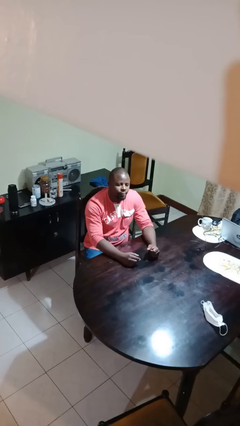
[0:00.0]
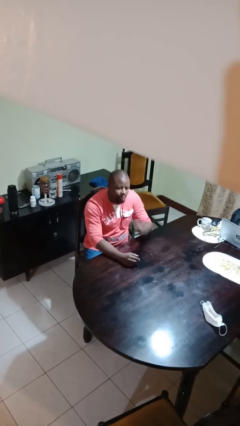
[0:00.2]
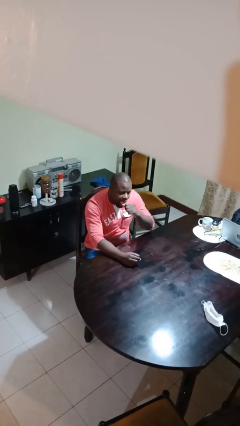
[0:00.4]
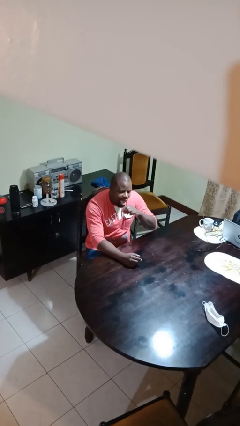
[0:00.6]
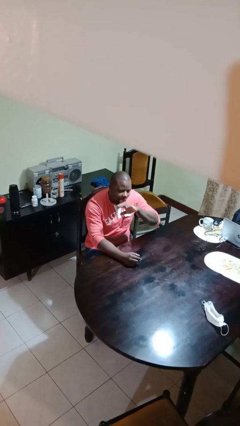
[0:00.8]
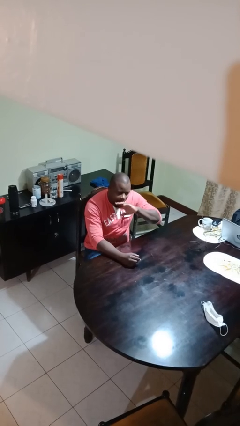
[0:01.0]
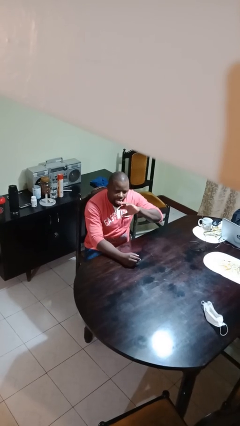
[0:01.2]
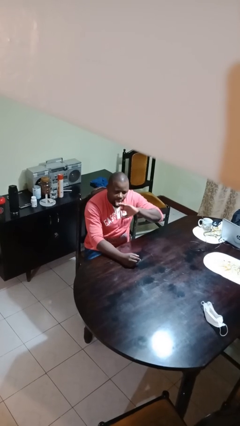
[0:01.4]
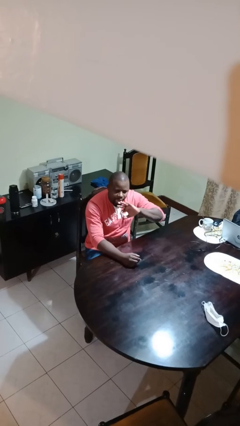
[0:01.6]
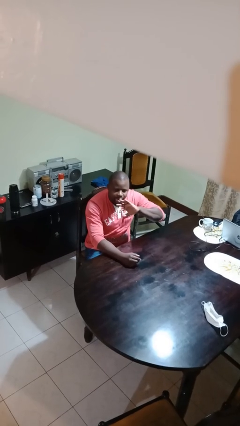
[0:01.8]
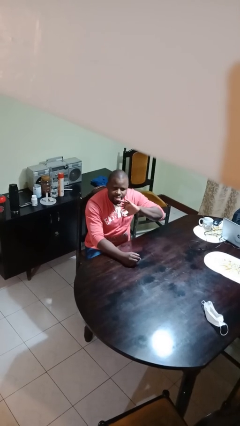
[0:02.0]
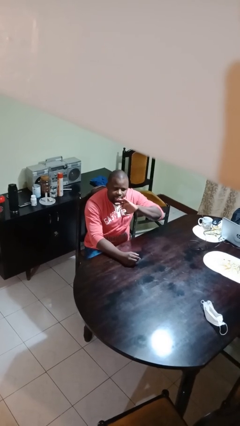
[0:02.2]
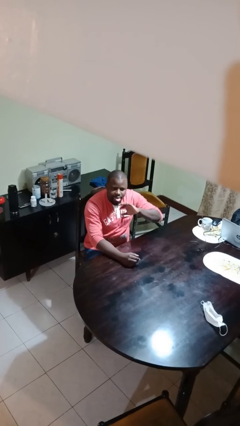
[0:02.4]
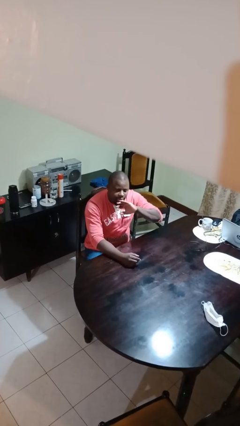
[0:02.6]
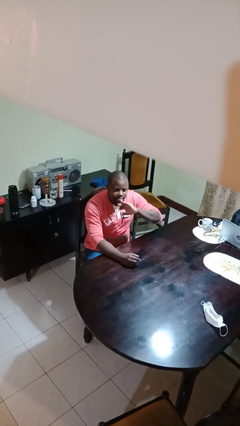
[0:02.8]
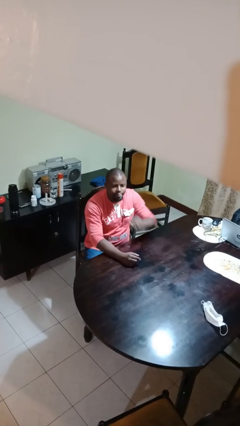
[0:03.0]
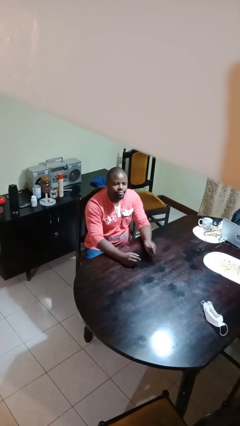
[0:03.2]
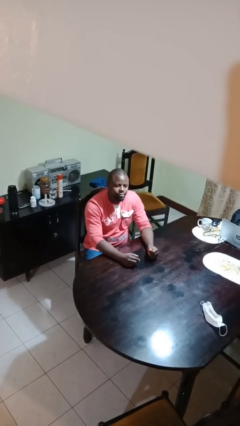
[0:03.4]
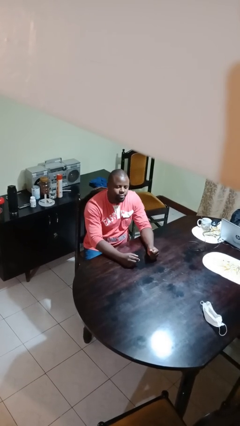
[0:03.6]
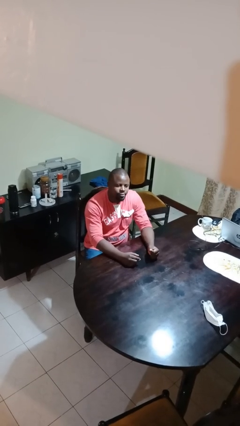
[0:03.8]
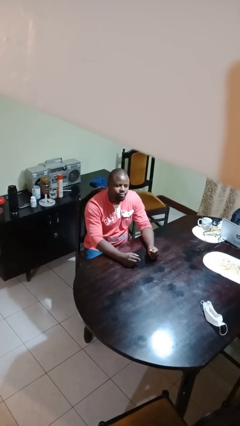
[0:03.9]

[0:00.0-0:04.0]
person licks fingers

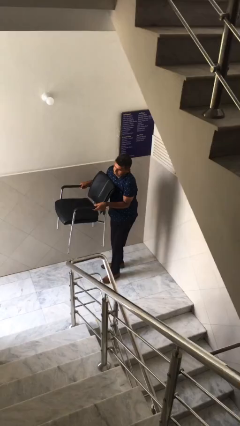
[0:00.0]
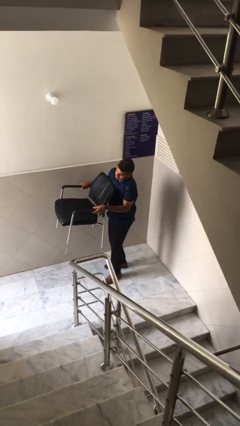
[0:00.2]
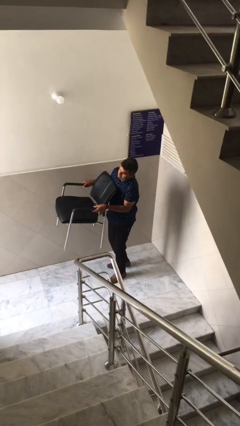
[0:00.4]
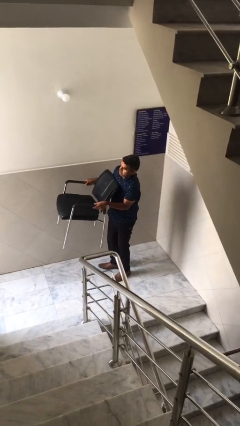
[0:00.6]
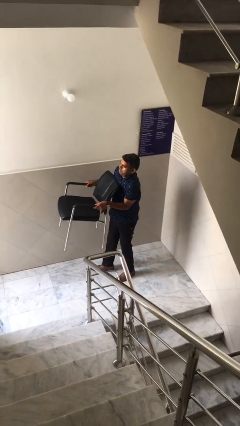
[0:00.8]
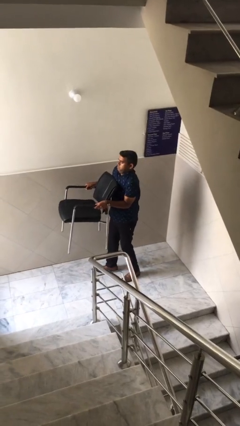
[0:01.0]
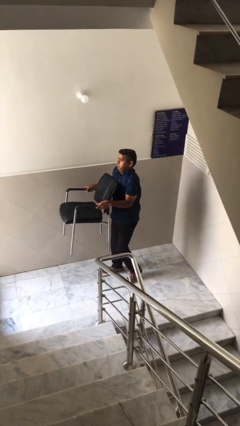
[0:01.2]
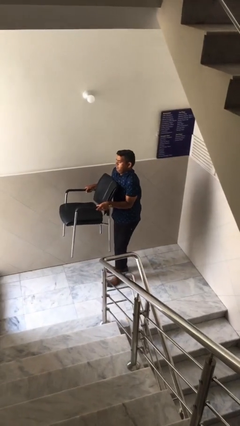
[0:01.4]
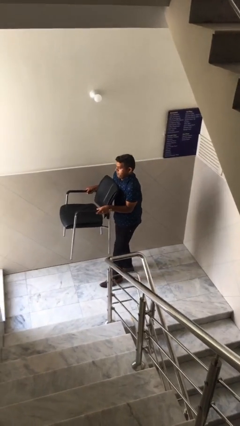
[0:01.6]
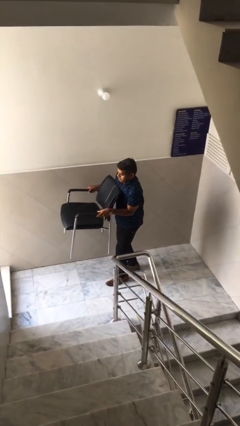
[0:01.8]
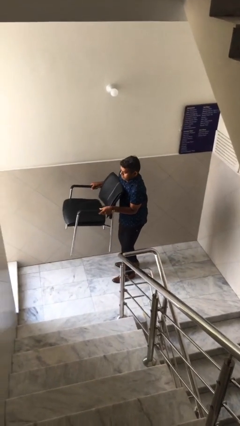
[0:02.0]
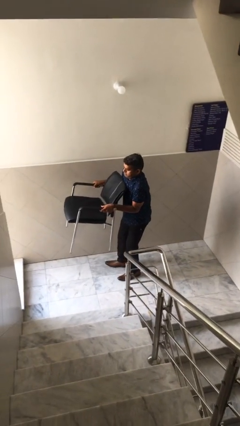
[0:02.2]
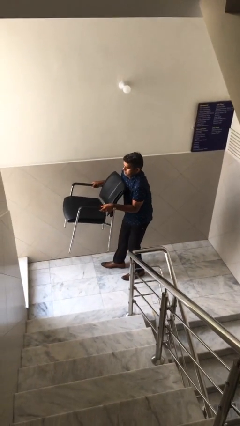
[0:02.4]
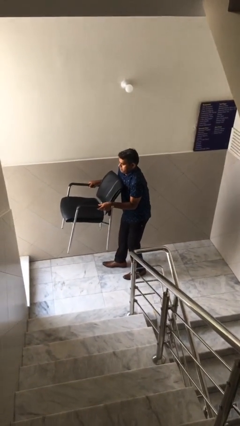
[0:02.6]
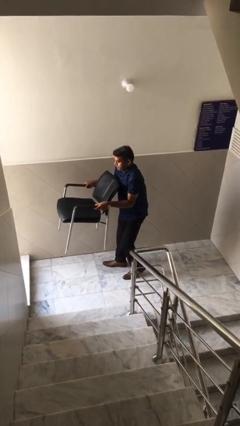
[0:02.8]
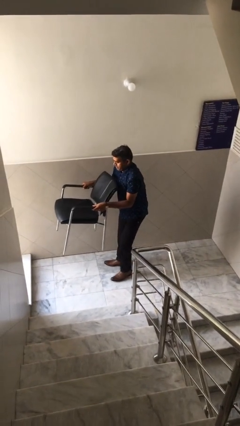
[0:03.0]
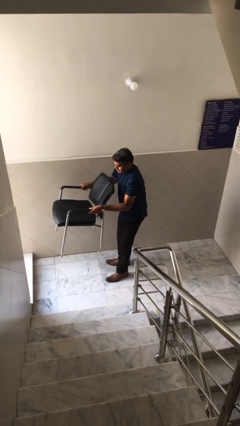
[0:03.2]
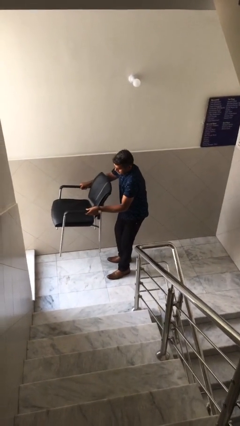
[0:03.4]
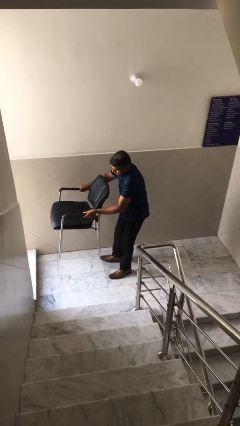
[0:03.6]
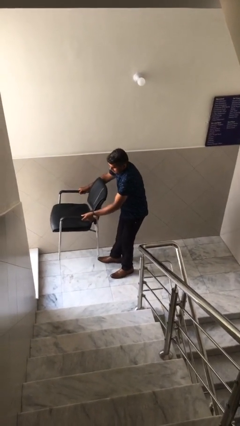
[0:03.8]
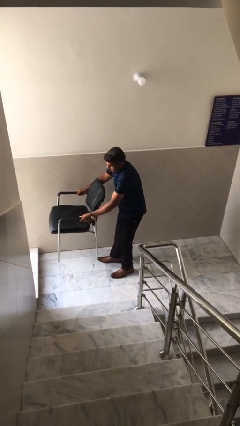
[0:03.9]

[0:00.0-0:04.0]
person carries heavy object

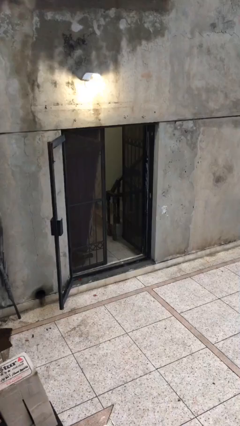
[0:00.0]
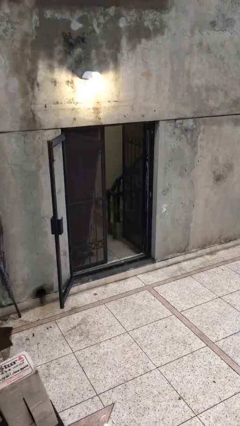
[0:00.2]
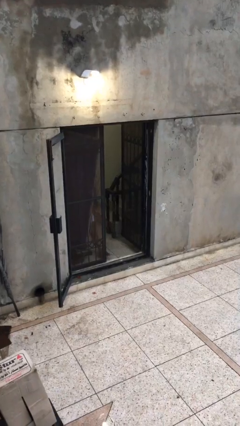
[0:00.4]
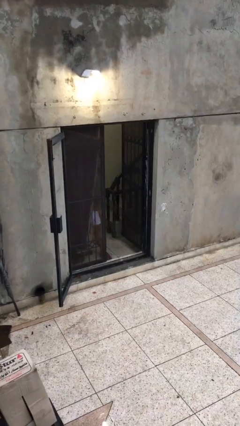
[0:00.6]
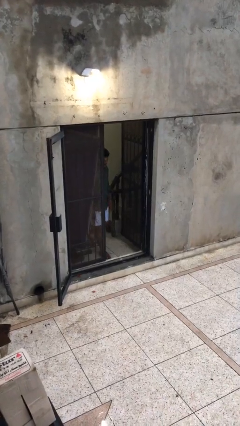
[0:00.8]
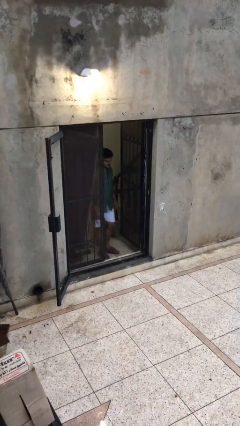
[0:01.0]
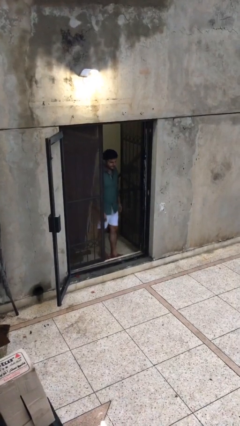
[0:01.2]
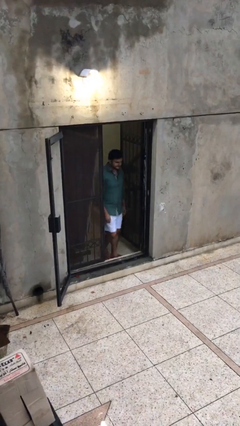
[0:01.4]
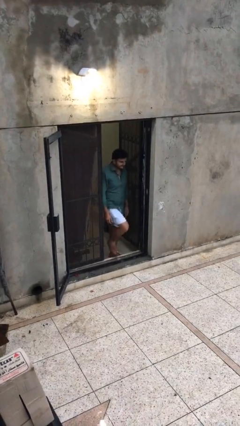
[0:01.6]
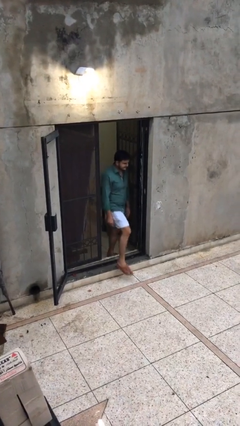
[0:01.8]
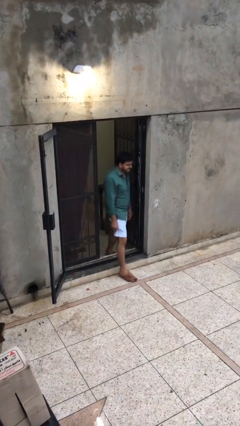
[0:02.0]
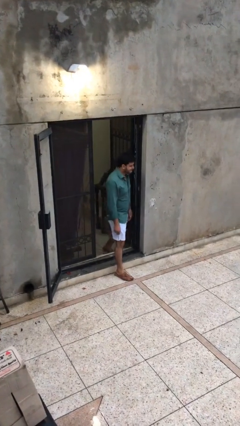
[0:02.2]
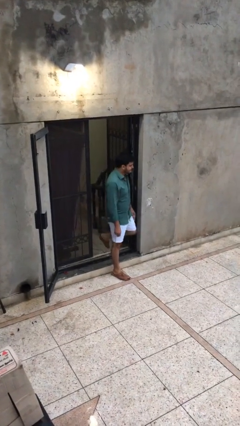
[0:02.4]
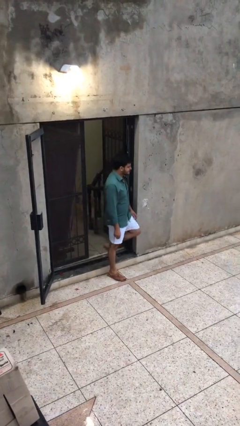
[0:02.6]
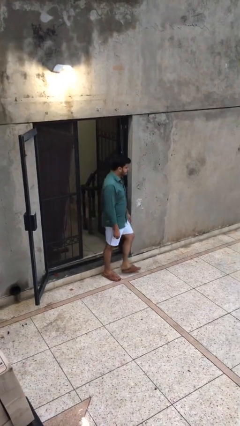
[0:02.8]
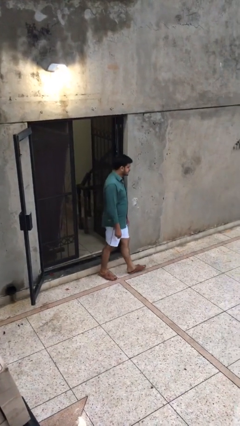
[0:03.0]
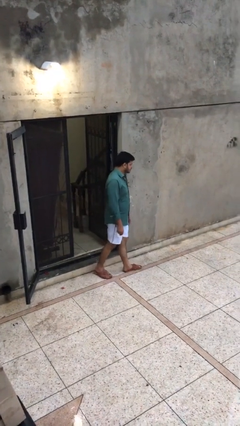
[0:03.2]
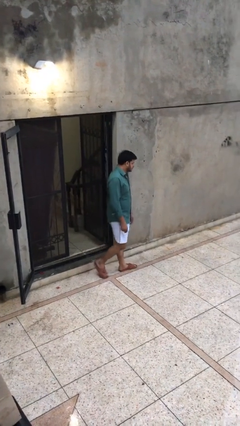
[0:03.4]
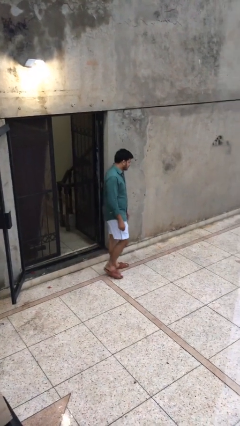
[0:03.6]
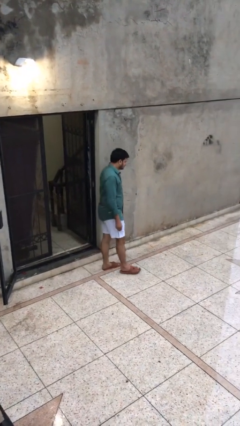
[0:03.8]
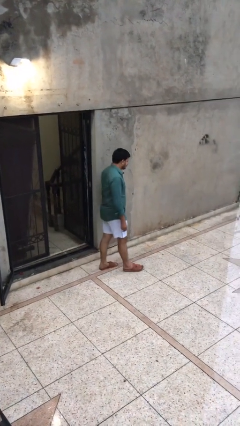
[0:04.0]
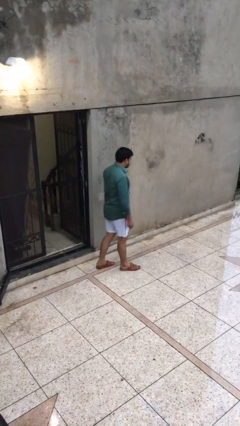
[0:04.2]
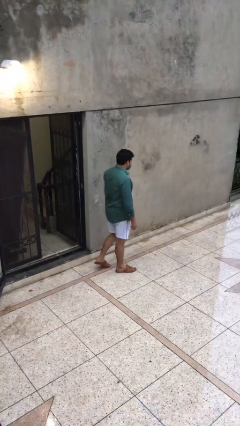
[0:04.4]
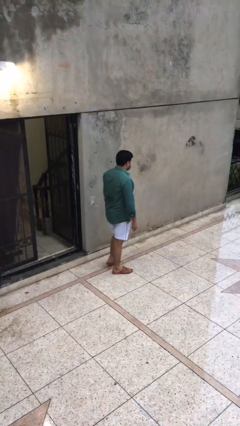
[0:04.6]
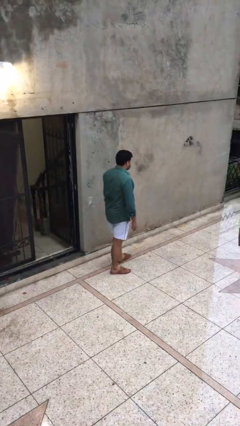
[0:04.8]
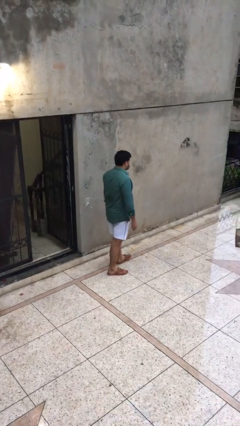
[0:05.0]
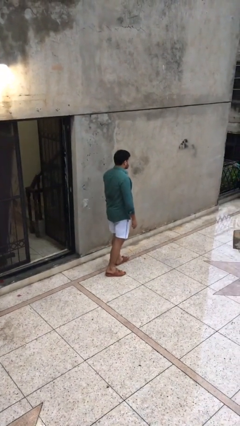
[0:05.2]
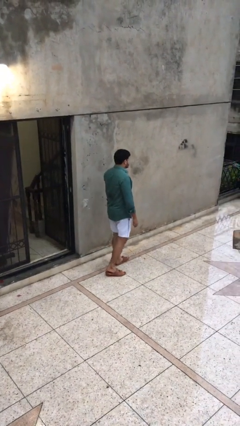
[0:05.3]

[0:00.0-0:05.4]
person enters scene through structure

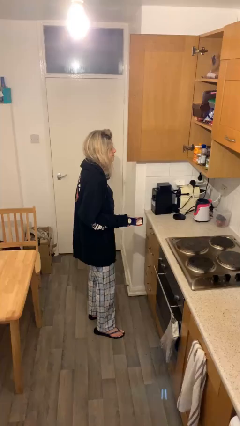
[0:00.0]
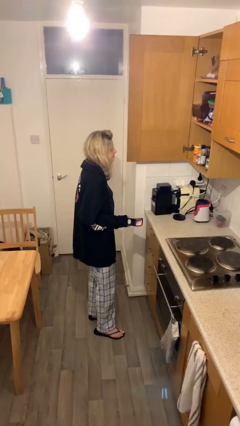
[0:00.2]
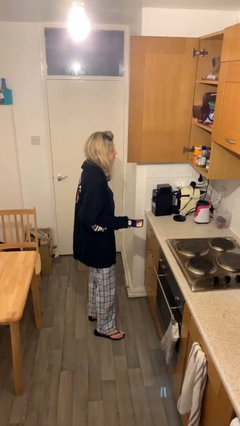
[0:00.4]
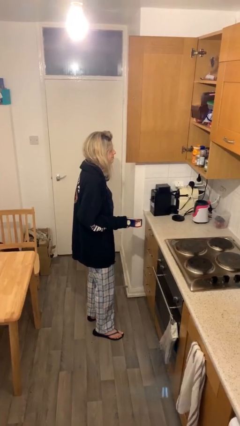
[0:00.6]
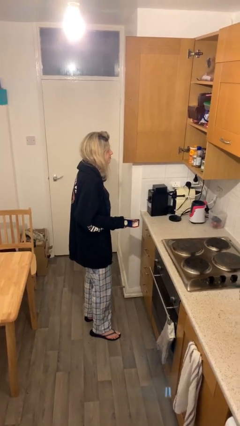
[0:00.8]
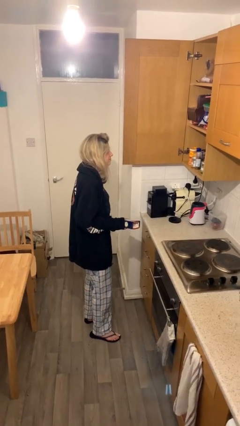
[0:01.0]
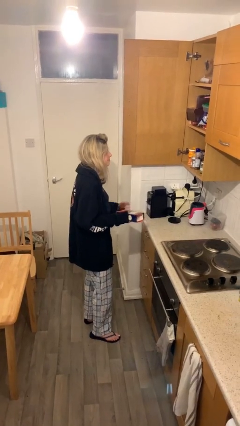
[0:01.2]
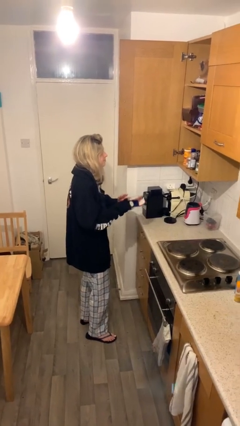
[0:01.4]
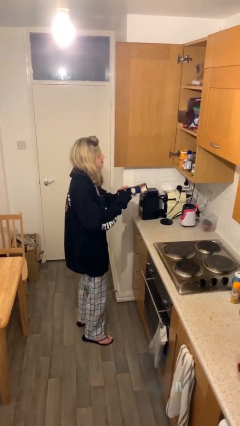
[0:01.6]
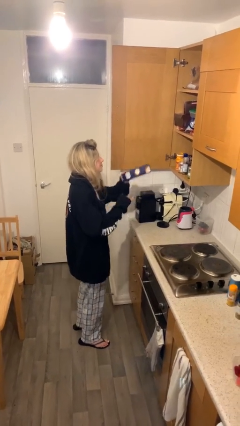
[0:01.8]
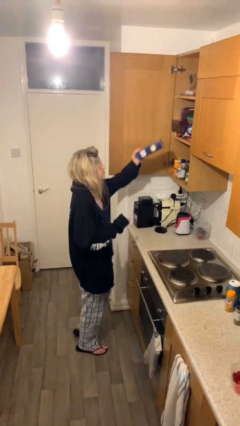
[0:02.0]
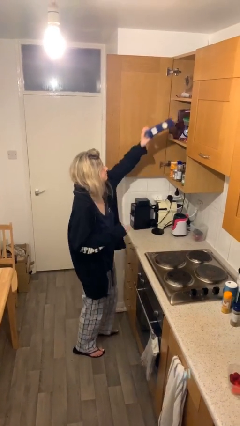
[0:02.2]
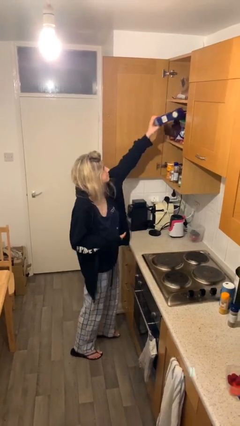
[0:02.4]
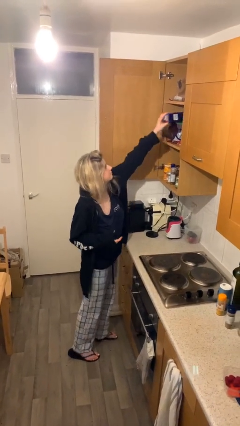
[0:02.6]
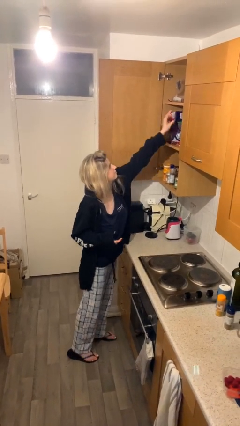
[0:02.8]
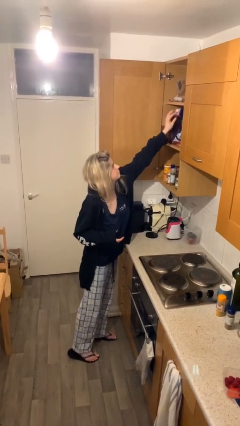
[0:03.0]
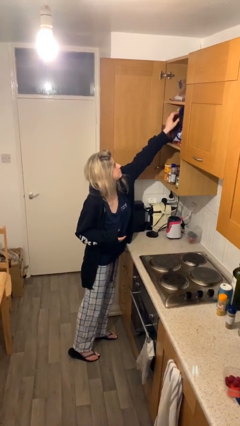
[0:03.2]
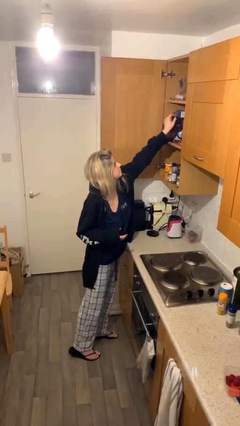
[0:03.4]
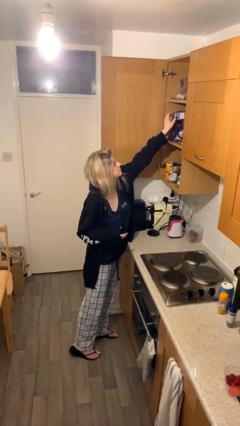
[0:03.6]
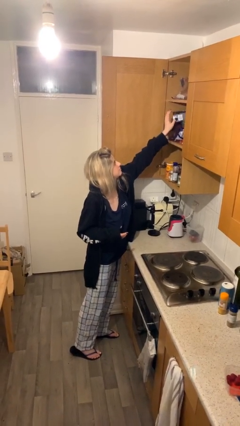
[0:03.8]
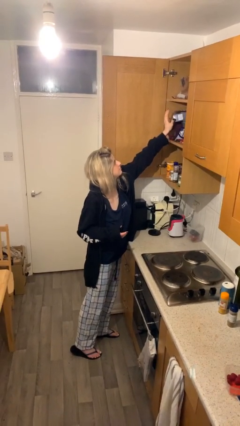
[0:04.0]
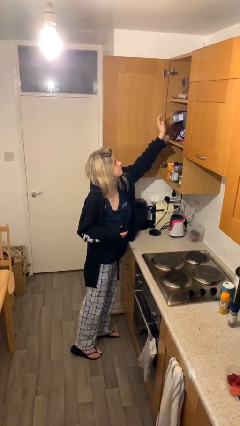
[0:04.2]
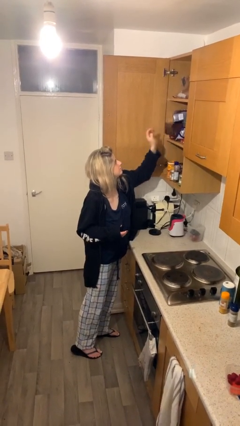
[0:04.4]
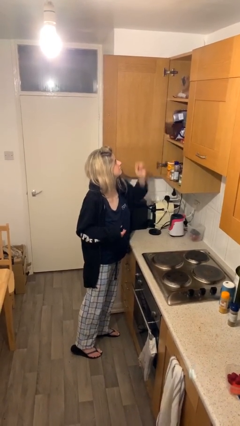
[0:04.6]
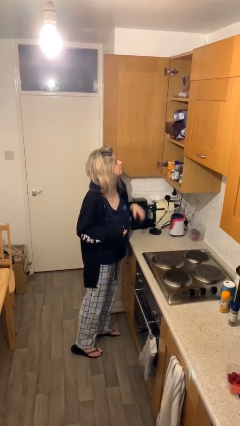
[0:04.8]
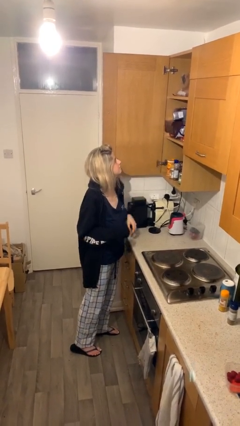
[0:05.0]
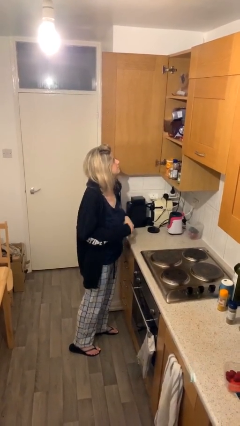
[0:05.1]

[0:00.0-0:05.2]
person puts down object on shelf
